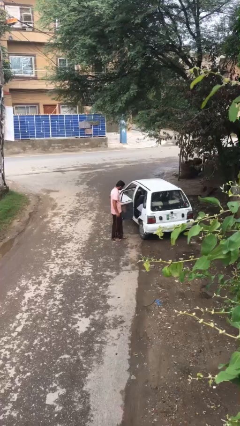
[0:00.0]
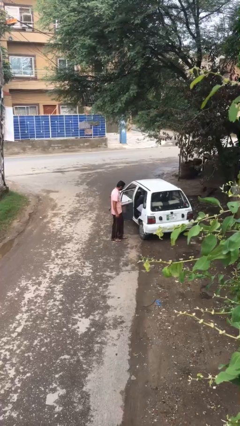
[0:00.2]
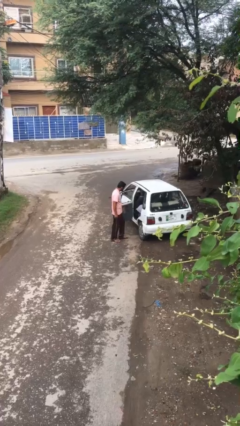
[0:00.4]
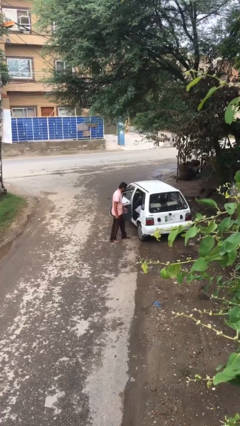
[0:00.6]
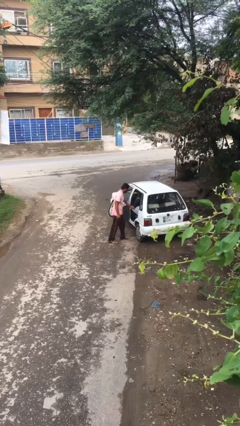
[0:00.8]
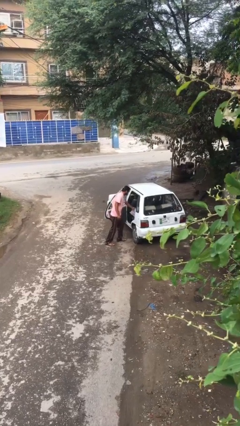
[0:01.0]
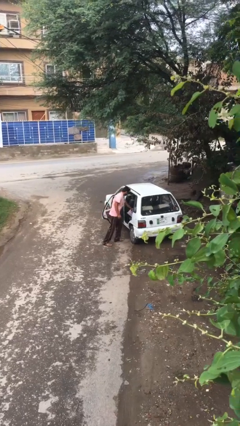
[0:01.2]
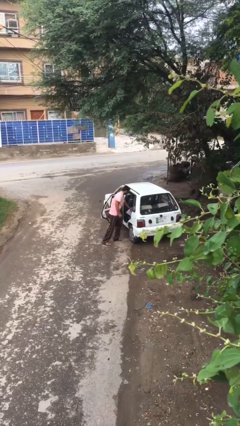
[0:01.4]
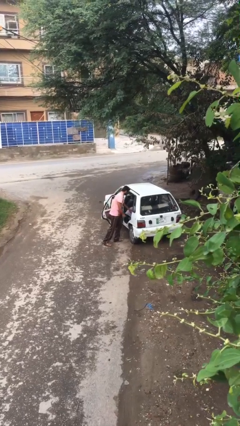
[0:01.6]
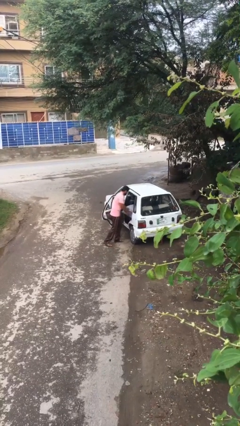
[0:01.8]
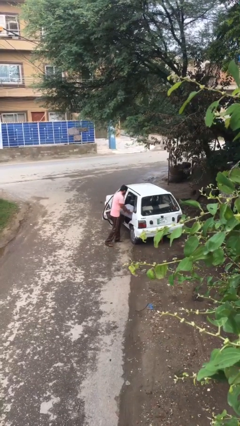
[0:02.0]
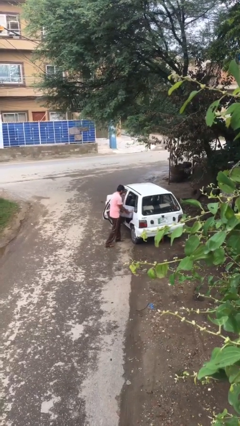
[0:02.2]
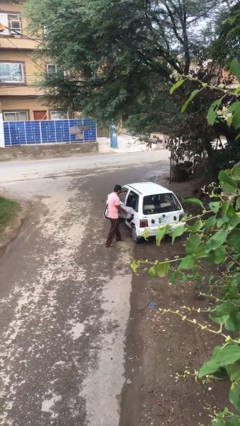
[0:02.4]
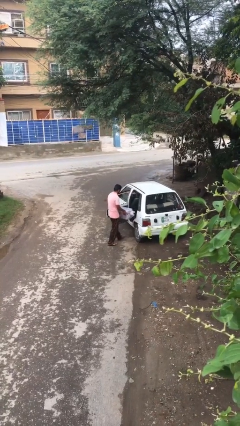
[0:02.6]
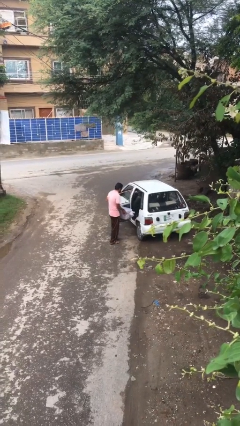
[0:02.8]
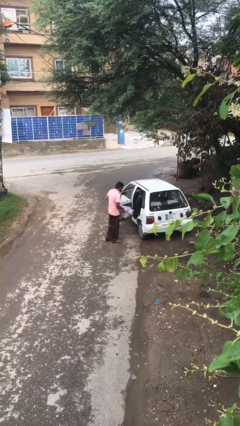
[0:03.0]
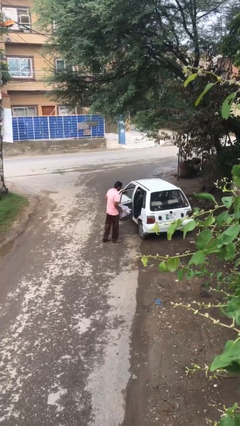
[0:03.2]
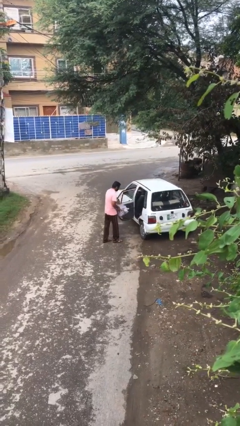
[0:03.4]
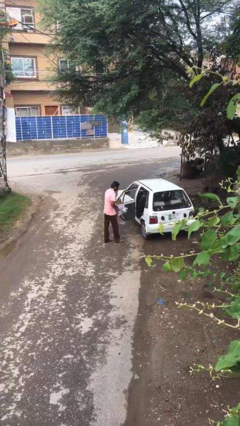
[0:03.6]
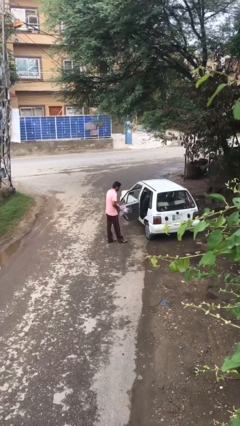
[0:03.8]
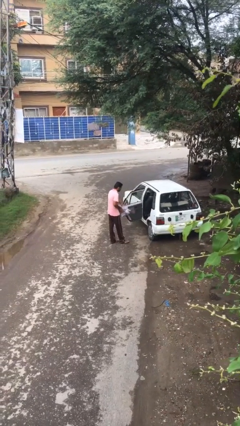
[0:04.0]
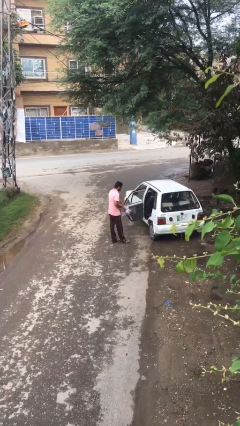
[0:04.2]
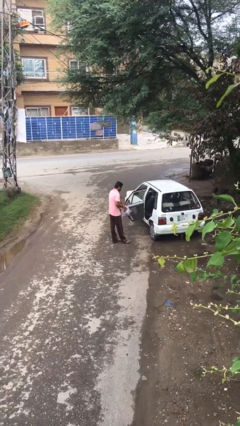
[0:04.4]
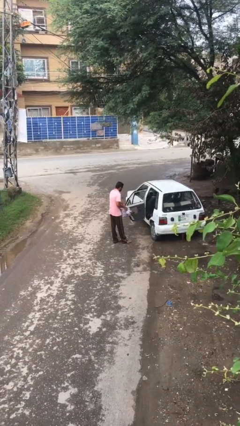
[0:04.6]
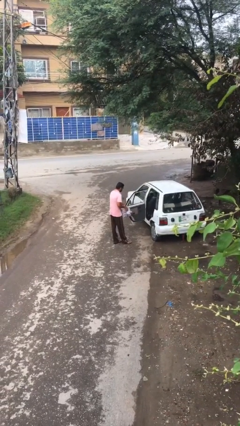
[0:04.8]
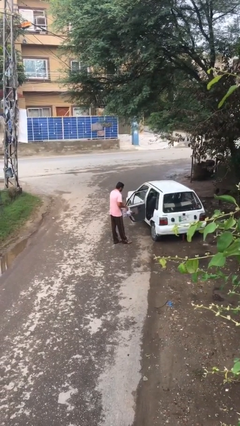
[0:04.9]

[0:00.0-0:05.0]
person unloads car

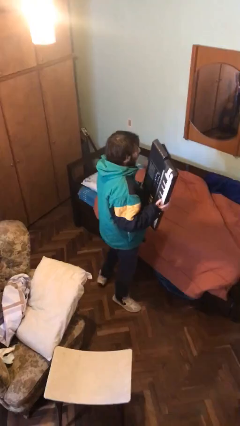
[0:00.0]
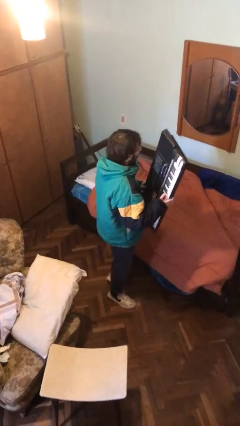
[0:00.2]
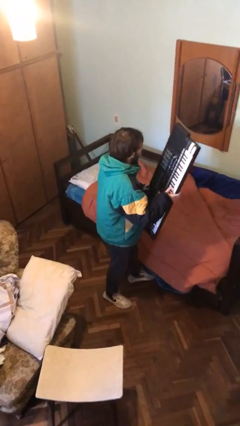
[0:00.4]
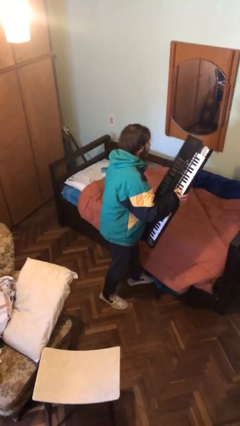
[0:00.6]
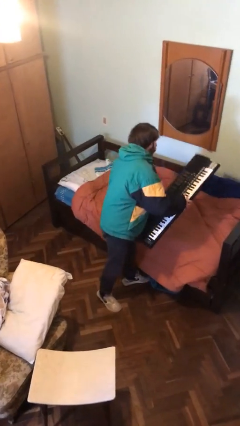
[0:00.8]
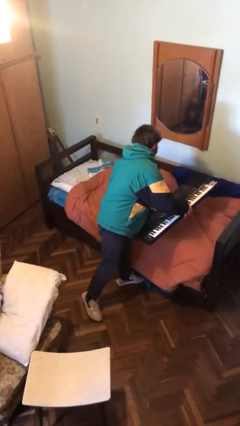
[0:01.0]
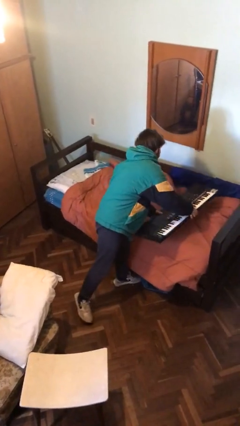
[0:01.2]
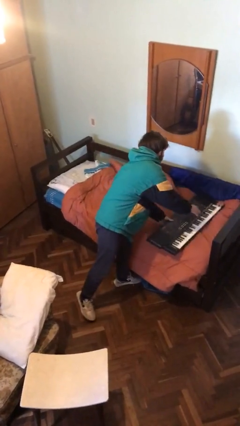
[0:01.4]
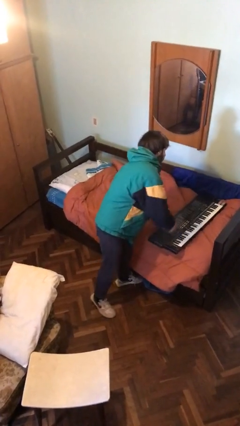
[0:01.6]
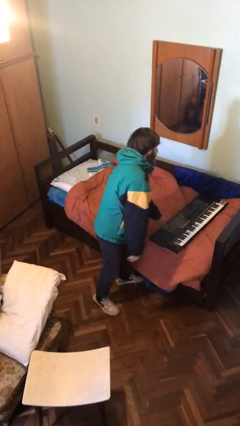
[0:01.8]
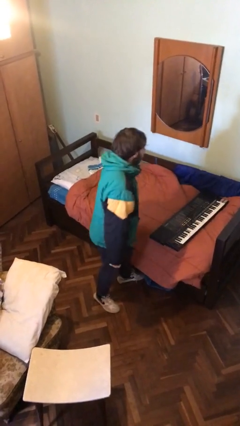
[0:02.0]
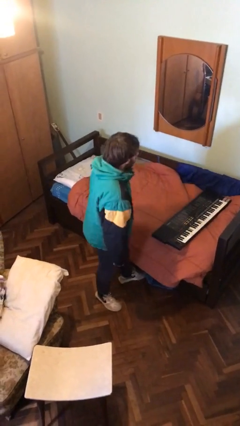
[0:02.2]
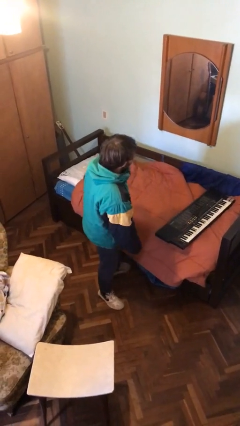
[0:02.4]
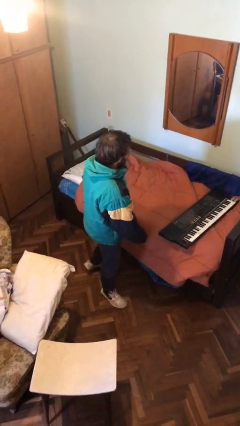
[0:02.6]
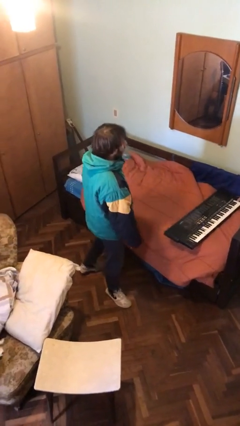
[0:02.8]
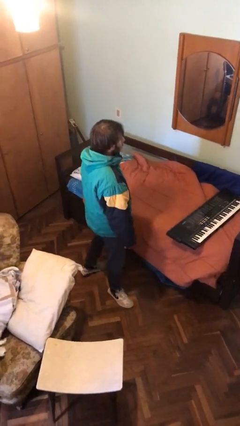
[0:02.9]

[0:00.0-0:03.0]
person puts down object on bed

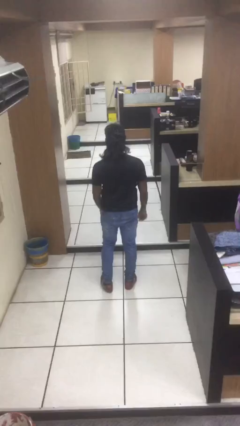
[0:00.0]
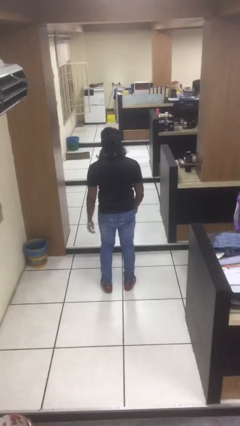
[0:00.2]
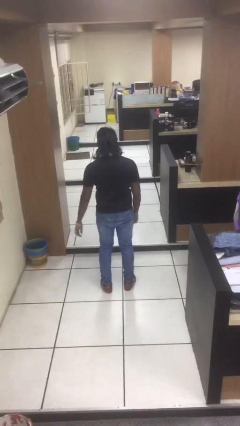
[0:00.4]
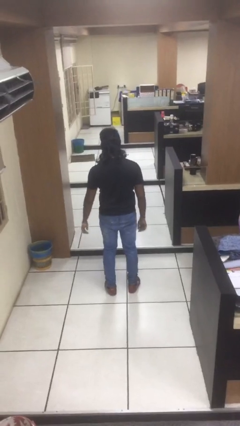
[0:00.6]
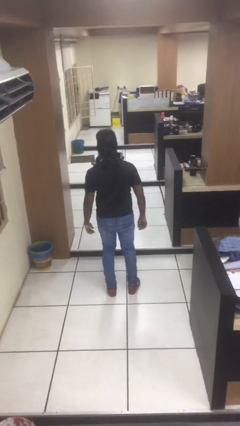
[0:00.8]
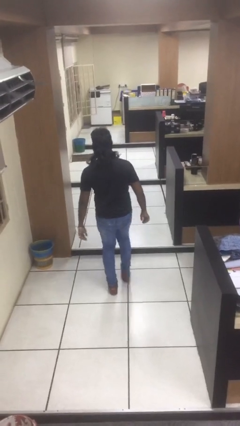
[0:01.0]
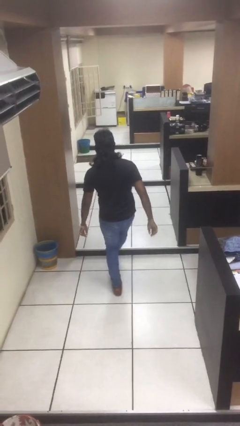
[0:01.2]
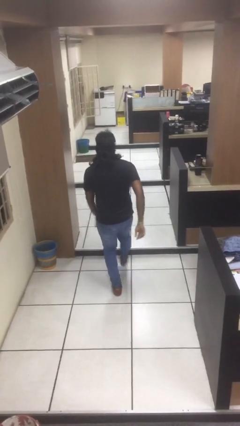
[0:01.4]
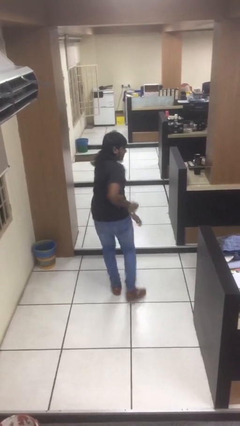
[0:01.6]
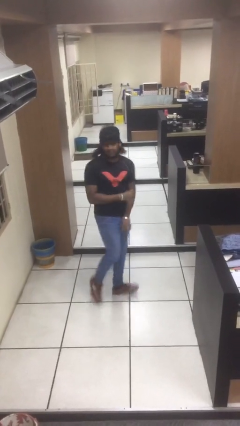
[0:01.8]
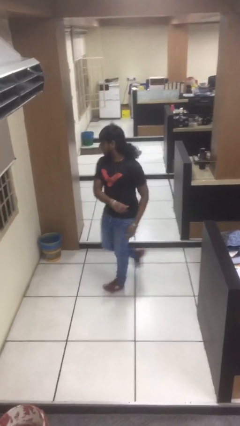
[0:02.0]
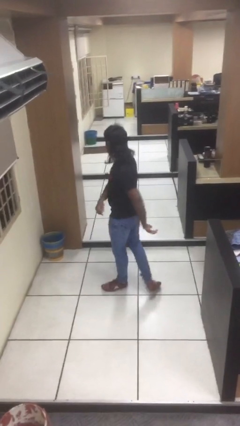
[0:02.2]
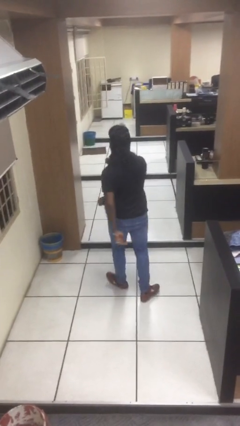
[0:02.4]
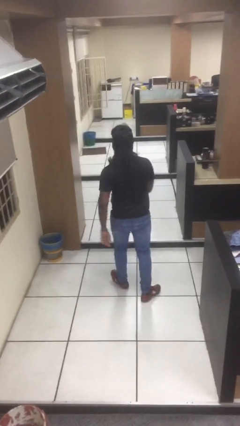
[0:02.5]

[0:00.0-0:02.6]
person twirls

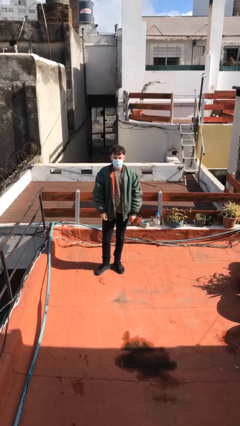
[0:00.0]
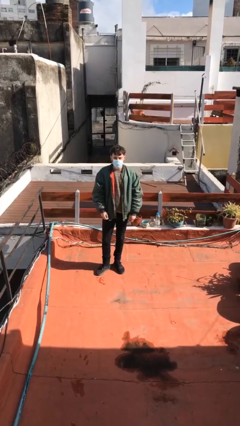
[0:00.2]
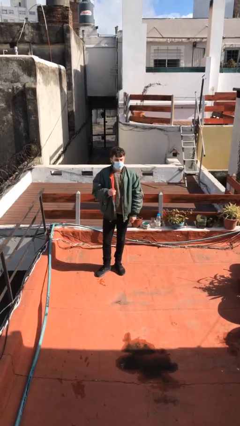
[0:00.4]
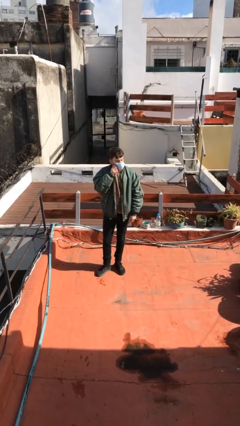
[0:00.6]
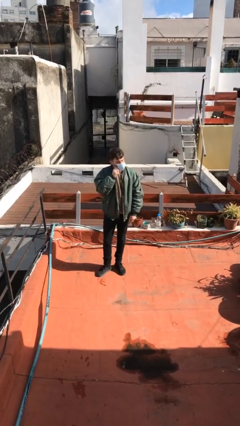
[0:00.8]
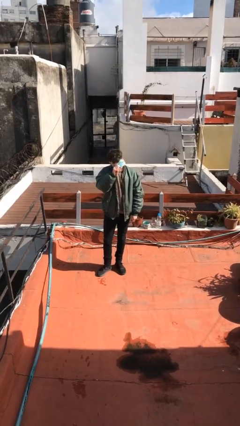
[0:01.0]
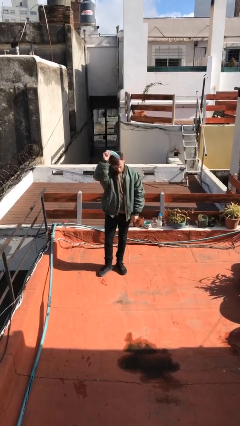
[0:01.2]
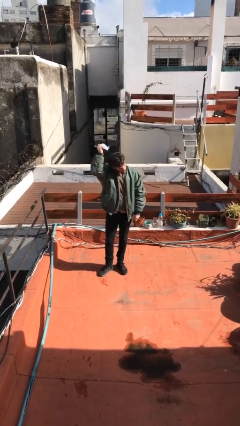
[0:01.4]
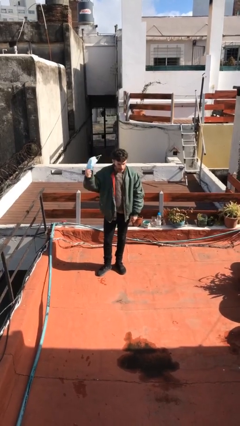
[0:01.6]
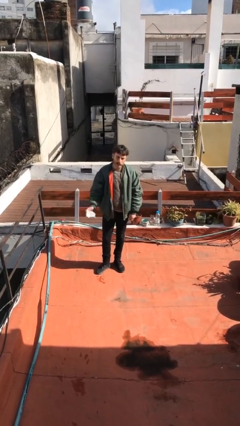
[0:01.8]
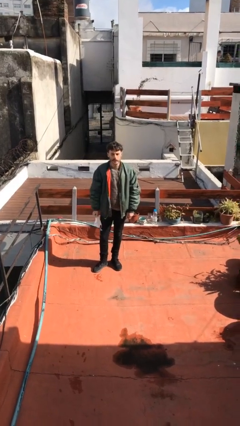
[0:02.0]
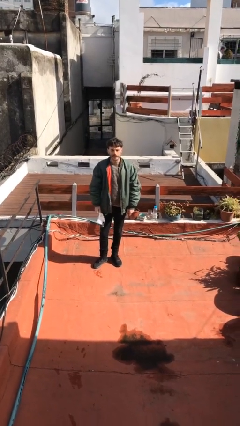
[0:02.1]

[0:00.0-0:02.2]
person takes off facemask

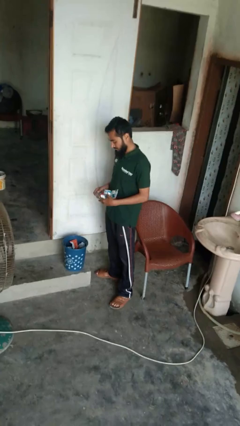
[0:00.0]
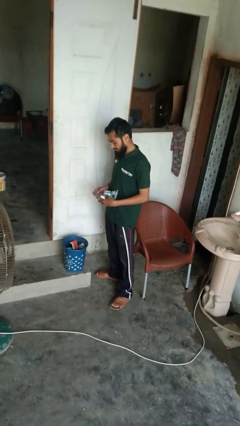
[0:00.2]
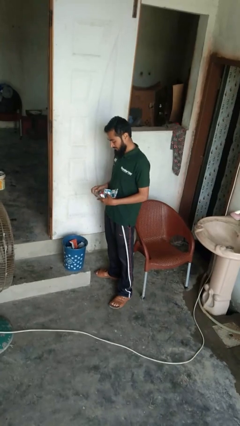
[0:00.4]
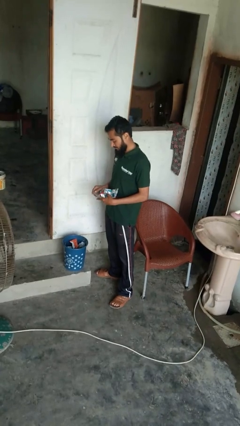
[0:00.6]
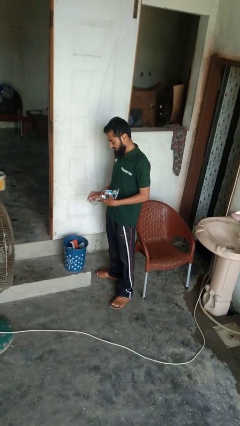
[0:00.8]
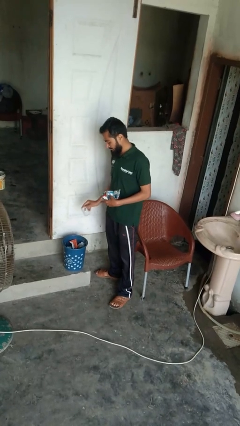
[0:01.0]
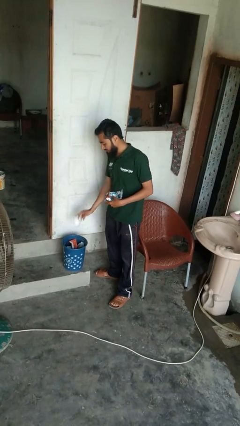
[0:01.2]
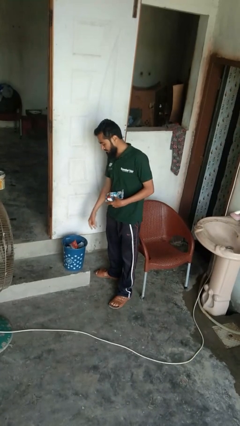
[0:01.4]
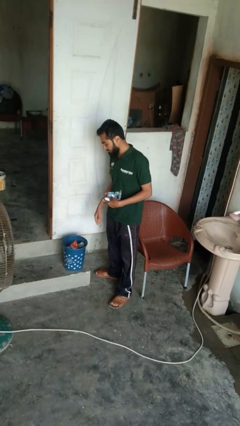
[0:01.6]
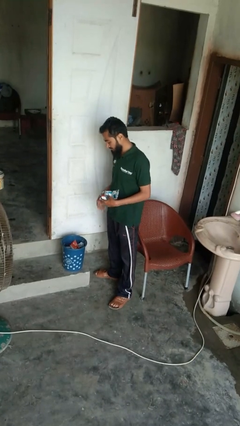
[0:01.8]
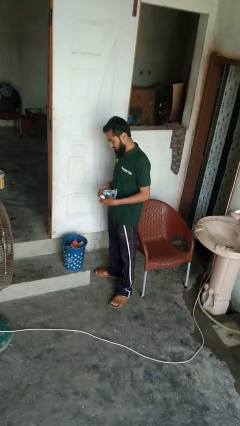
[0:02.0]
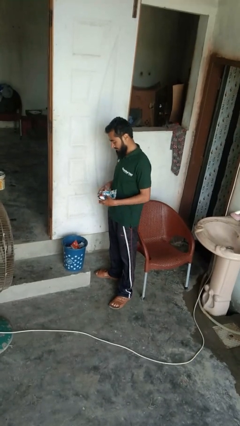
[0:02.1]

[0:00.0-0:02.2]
person discards trash

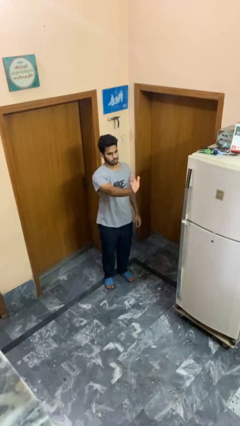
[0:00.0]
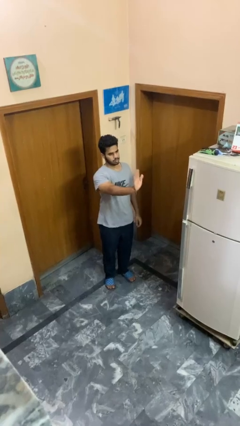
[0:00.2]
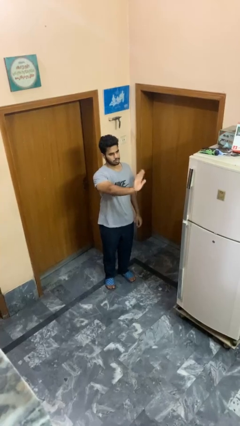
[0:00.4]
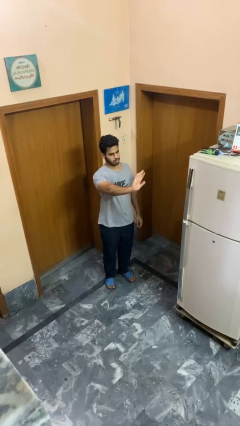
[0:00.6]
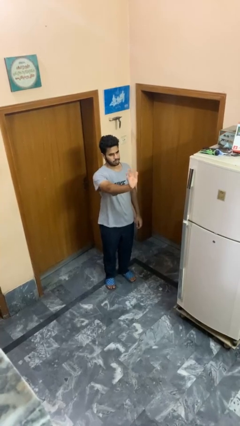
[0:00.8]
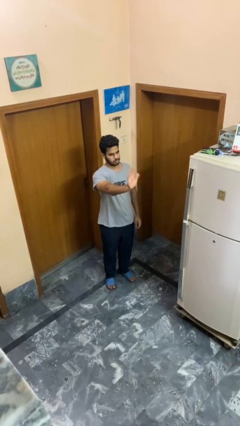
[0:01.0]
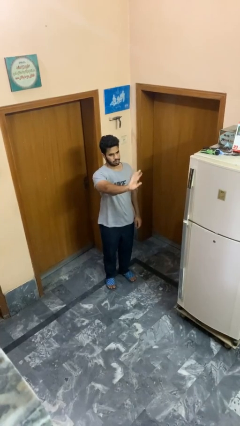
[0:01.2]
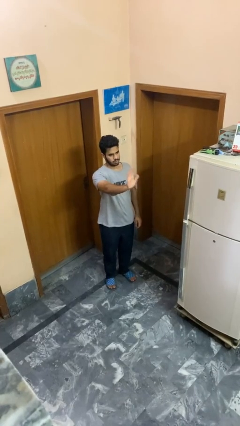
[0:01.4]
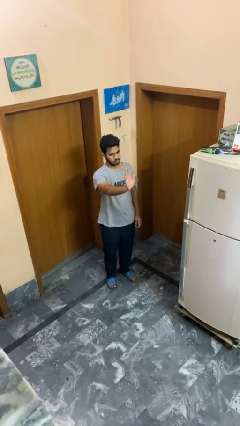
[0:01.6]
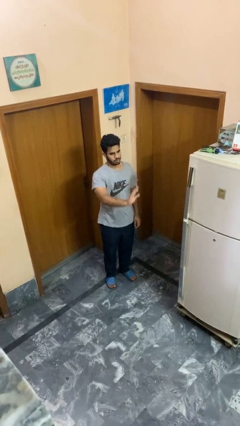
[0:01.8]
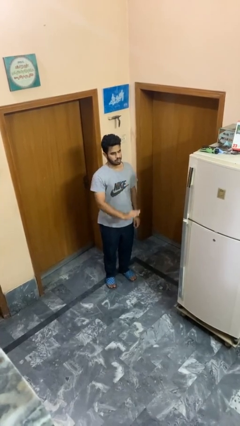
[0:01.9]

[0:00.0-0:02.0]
person waves at person

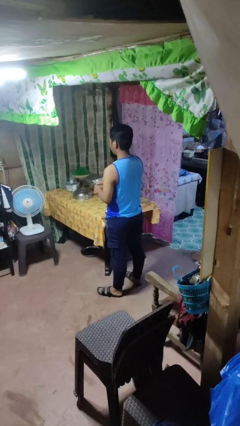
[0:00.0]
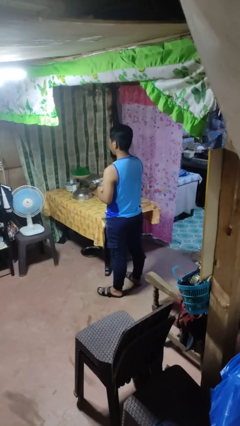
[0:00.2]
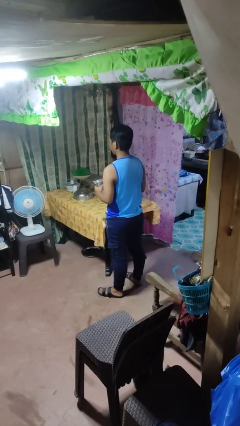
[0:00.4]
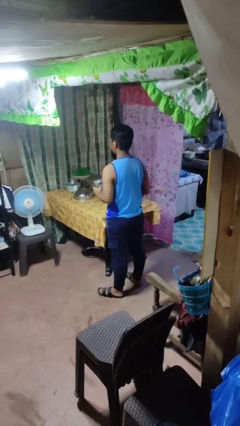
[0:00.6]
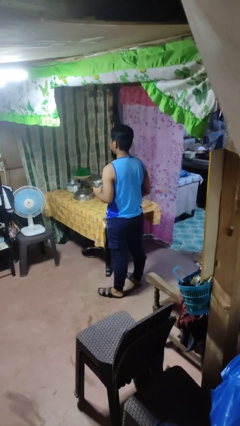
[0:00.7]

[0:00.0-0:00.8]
person opens jar
